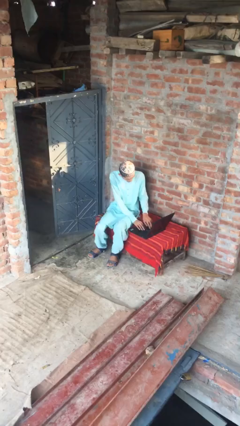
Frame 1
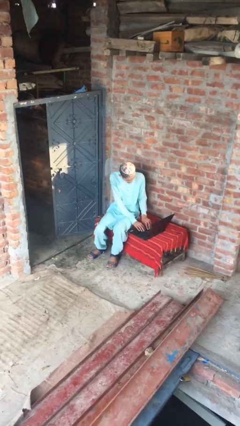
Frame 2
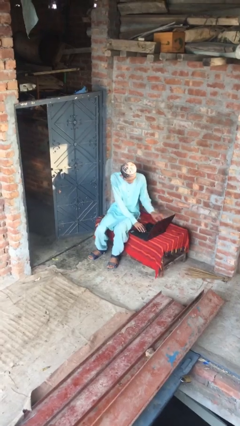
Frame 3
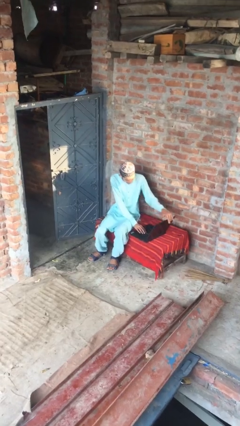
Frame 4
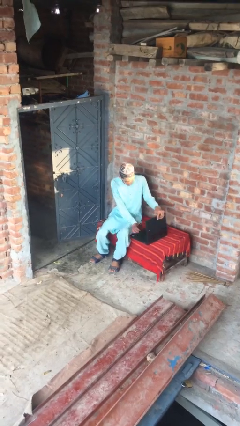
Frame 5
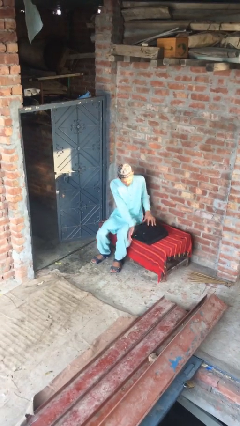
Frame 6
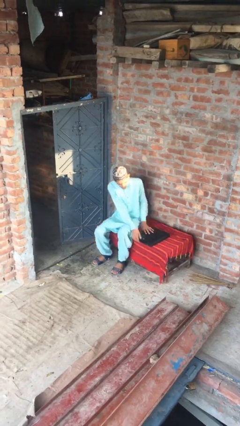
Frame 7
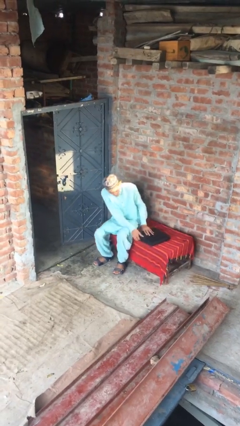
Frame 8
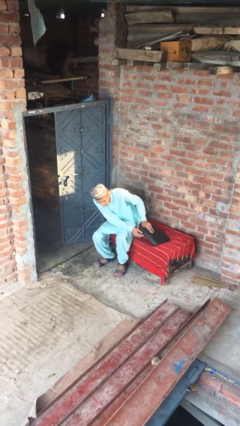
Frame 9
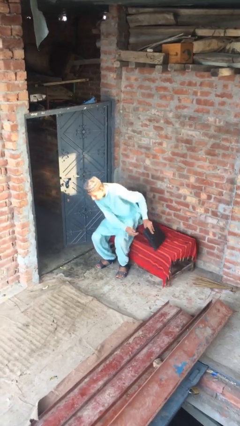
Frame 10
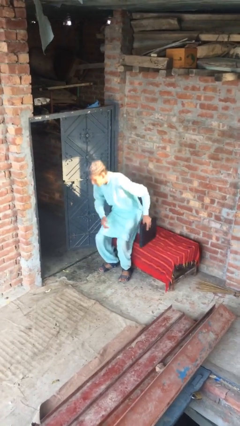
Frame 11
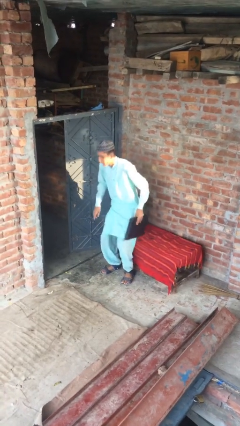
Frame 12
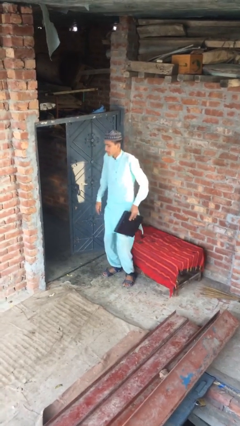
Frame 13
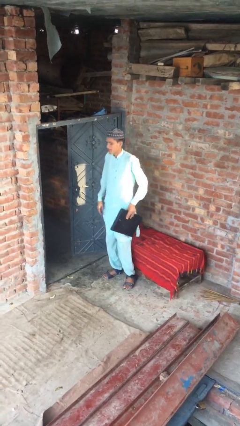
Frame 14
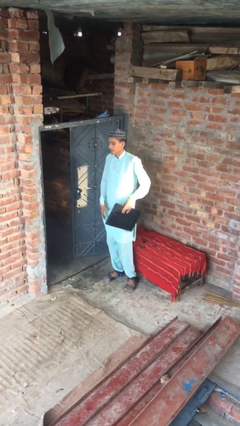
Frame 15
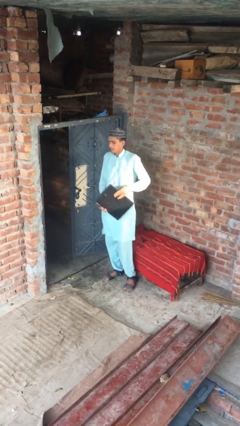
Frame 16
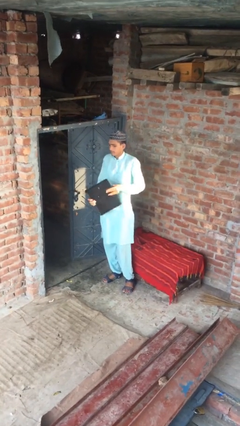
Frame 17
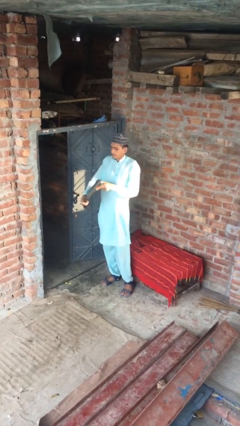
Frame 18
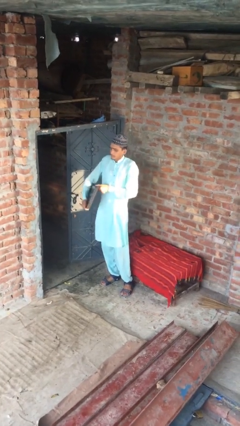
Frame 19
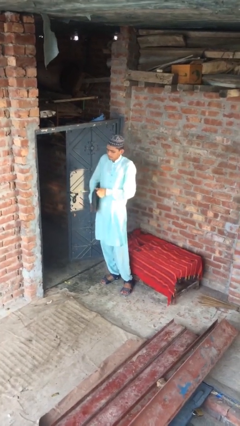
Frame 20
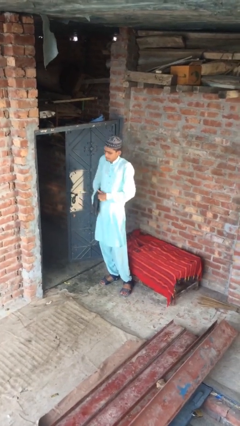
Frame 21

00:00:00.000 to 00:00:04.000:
person stands up

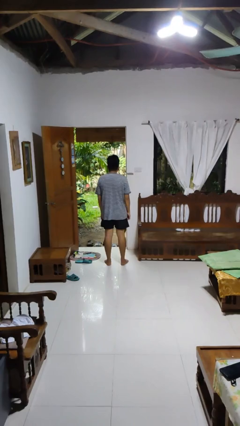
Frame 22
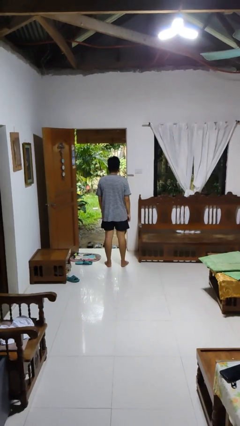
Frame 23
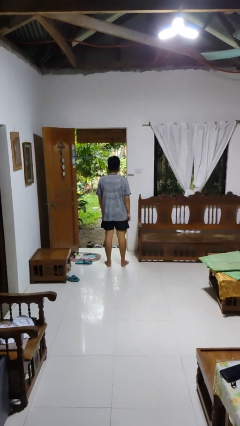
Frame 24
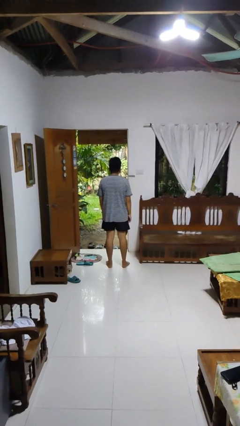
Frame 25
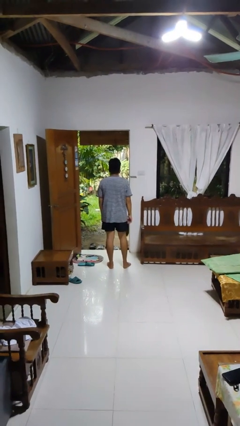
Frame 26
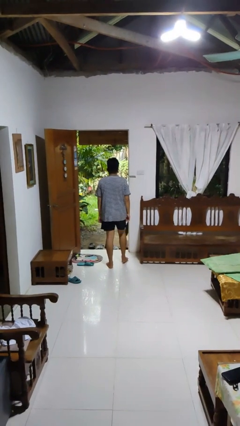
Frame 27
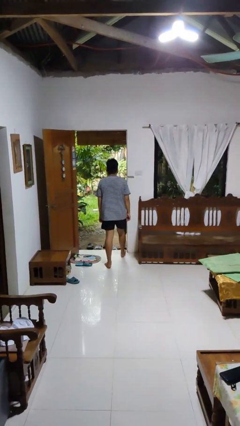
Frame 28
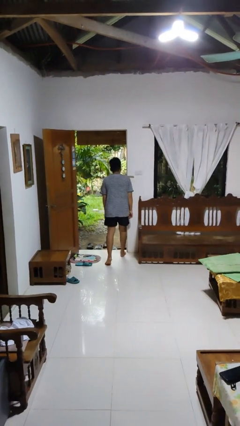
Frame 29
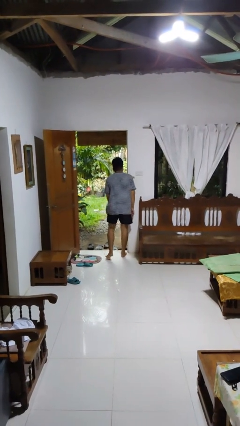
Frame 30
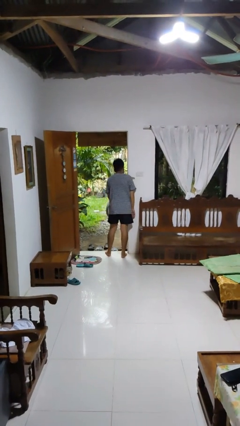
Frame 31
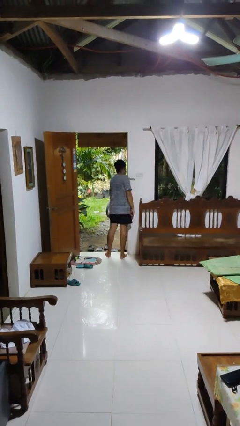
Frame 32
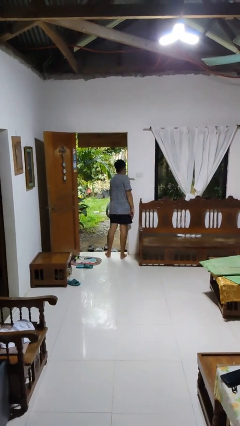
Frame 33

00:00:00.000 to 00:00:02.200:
person bumps into wall

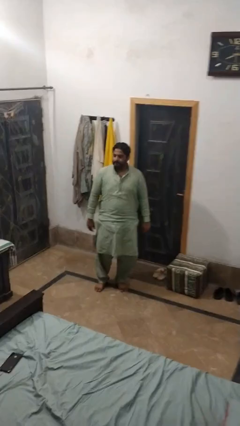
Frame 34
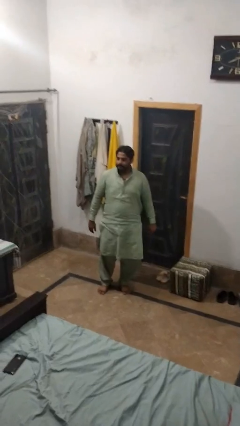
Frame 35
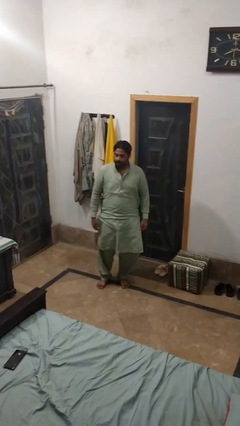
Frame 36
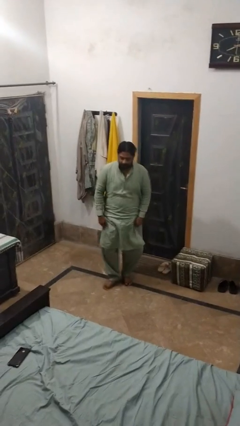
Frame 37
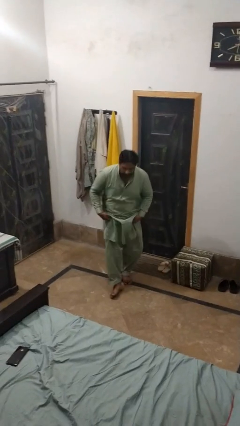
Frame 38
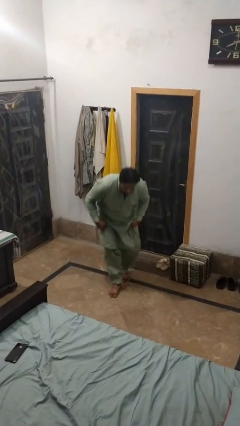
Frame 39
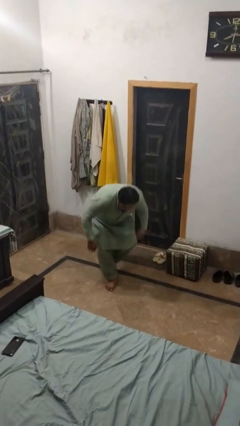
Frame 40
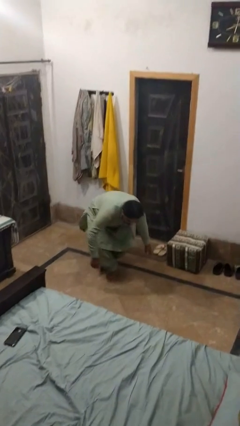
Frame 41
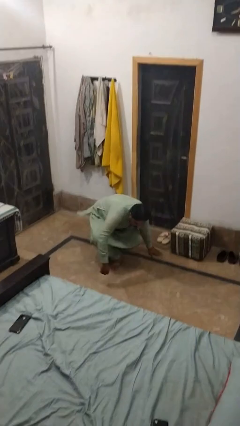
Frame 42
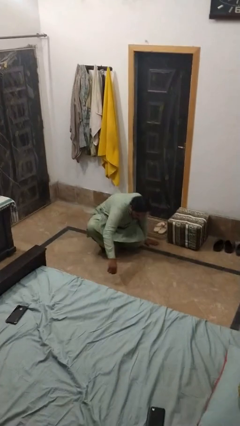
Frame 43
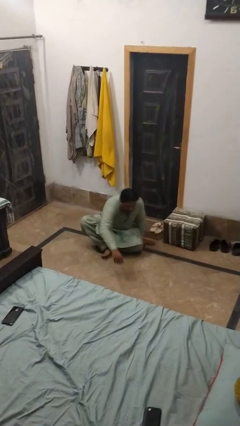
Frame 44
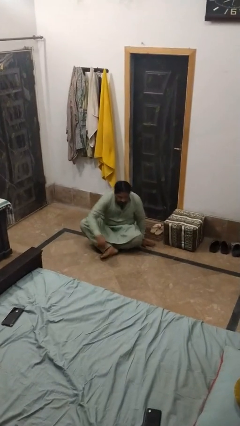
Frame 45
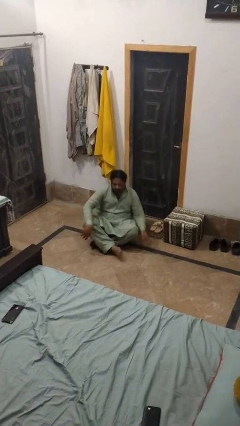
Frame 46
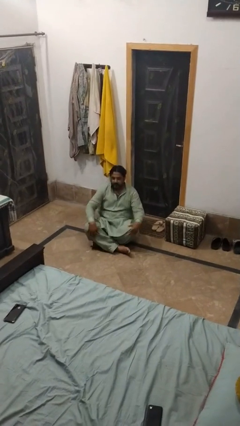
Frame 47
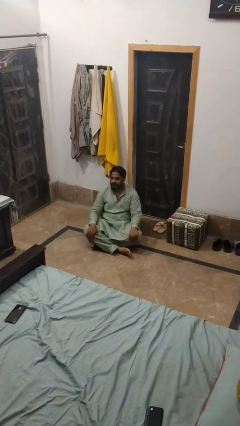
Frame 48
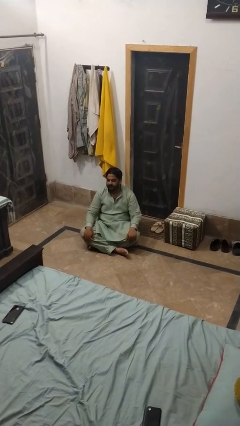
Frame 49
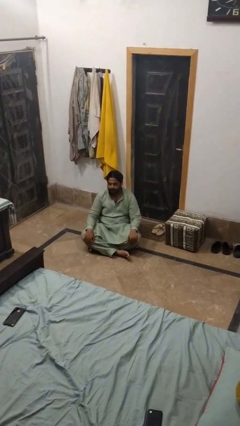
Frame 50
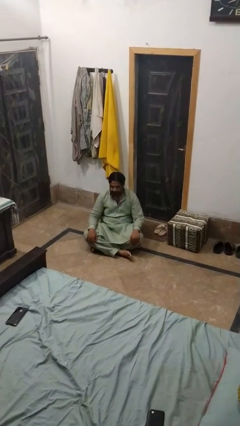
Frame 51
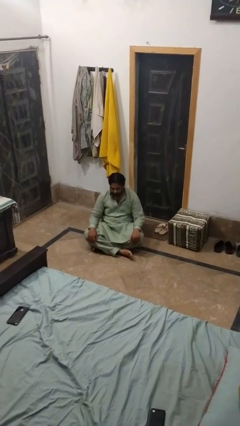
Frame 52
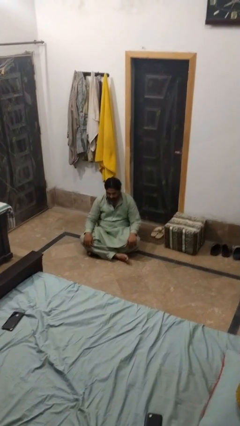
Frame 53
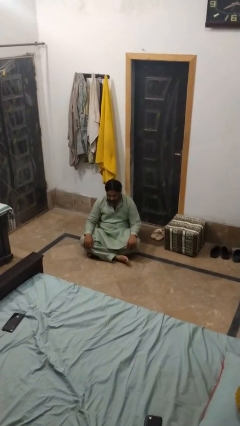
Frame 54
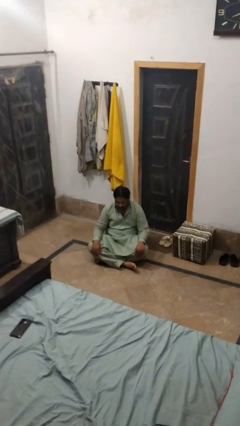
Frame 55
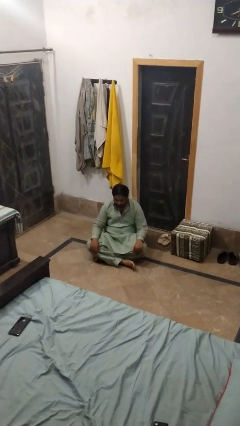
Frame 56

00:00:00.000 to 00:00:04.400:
person sits crisscross

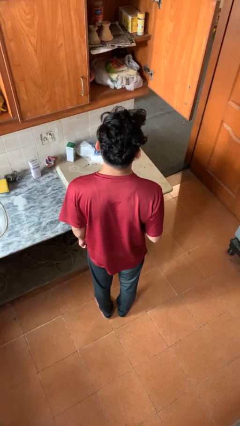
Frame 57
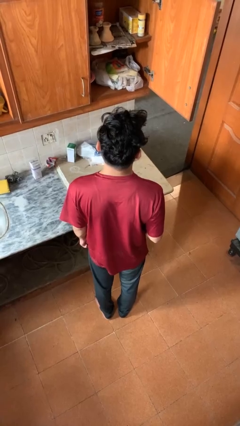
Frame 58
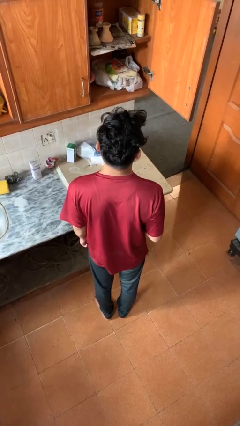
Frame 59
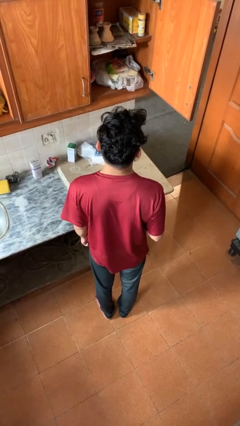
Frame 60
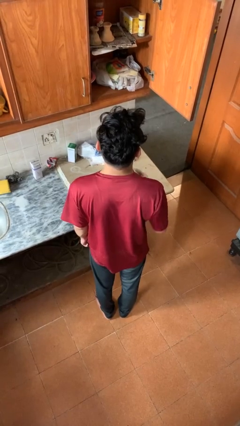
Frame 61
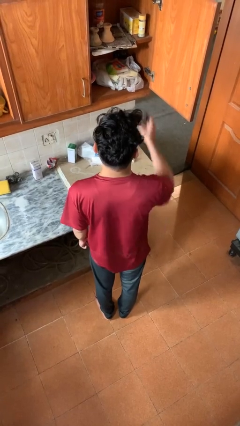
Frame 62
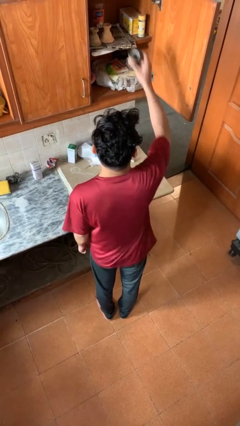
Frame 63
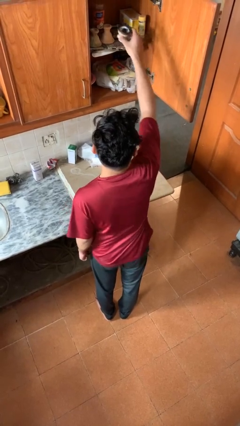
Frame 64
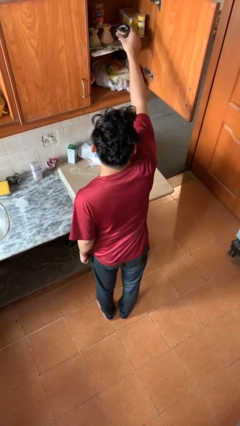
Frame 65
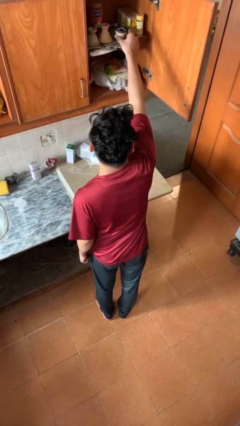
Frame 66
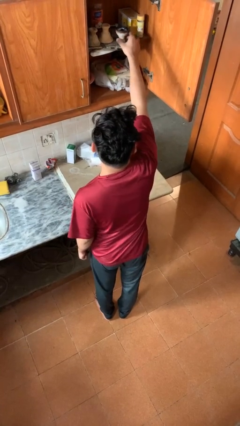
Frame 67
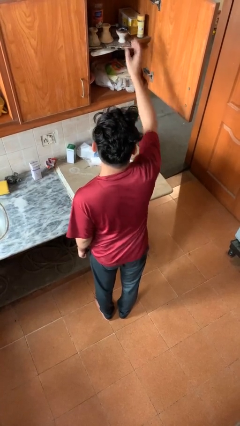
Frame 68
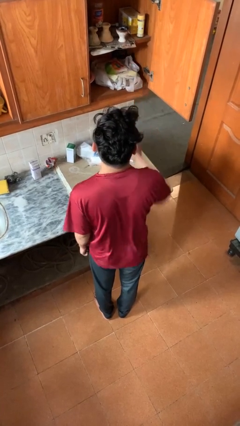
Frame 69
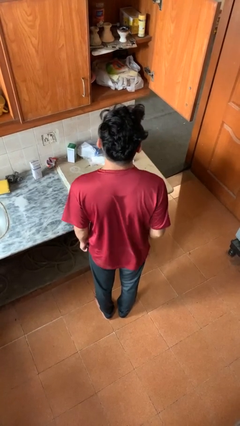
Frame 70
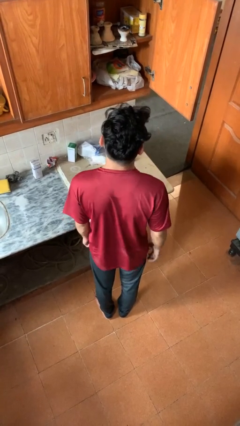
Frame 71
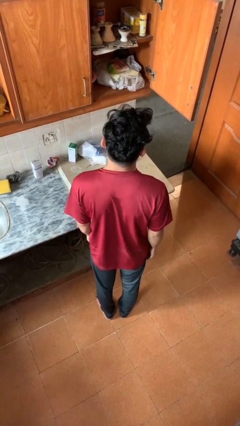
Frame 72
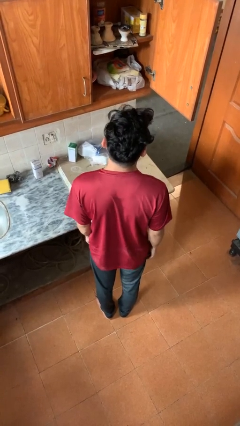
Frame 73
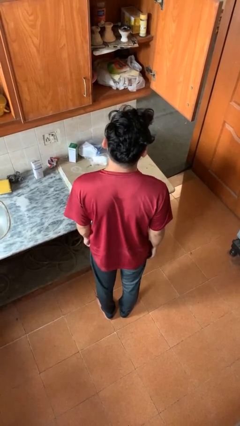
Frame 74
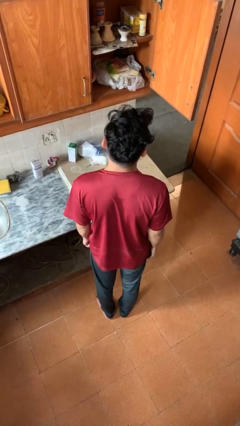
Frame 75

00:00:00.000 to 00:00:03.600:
person puts object in cabinet

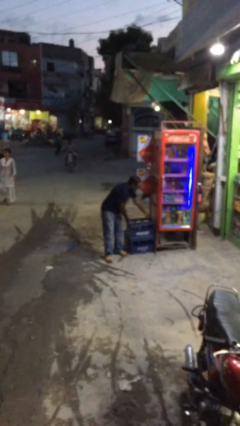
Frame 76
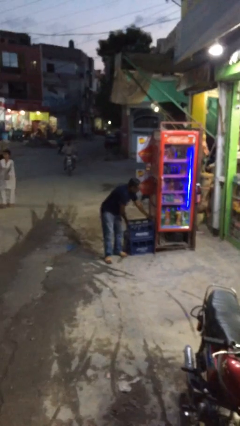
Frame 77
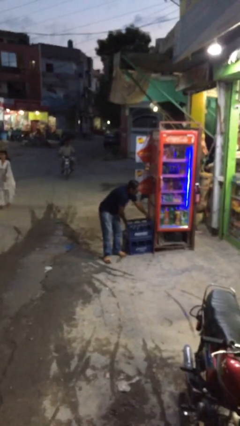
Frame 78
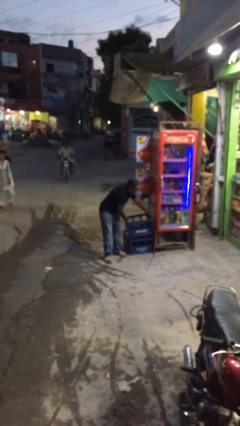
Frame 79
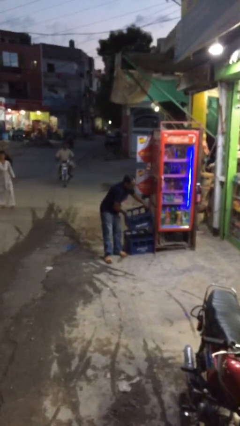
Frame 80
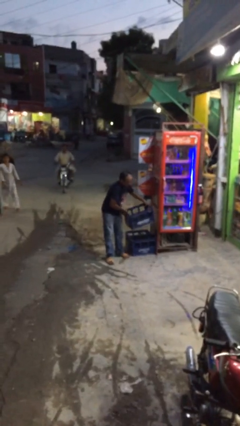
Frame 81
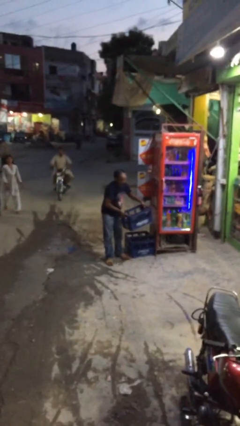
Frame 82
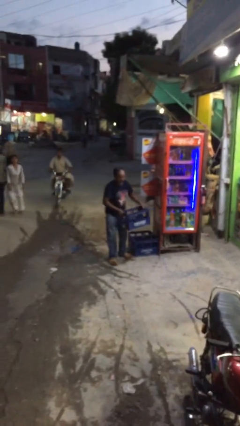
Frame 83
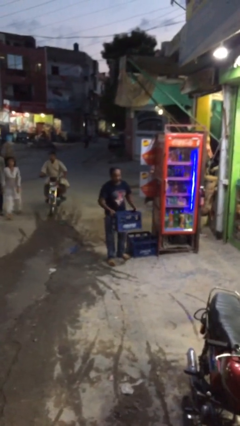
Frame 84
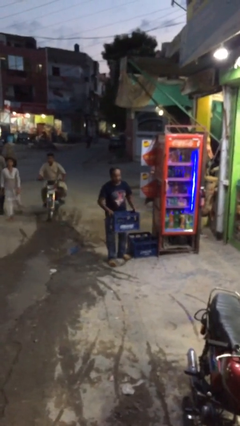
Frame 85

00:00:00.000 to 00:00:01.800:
person picks up object from floor

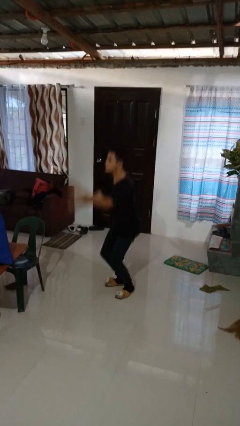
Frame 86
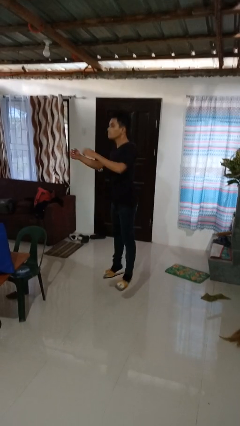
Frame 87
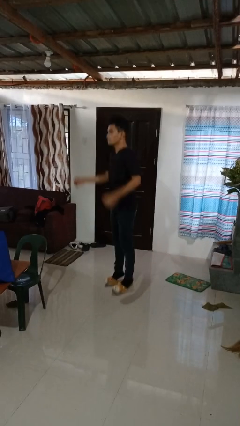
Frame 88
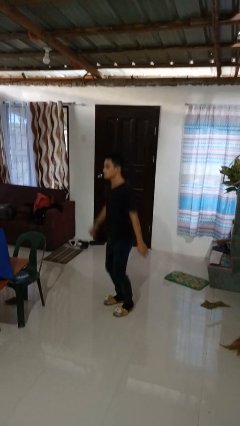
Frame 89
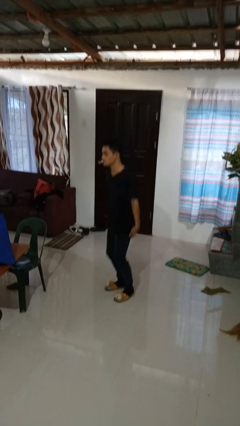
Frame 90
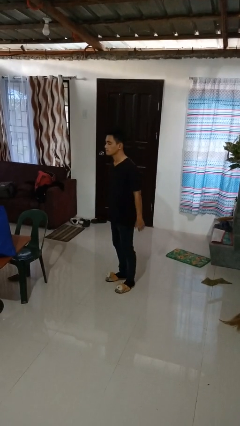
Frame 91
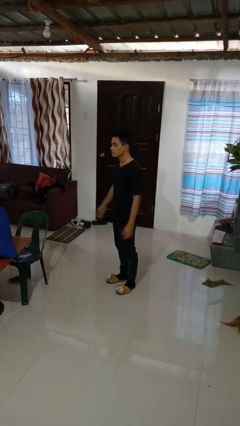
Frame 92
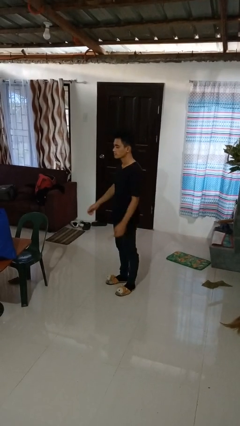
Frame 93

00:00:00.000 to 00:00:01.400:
person jumps
